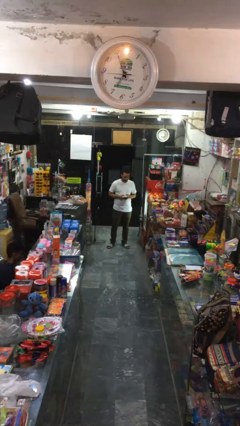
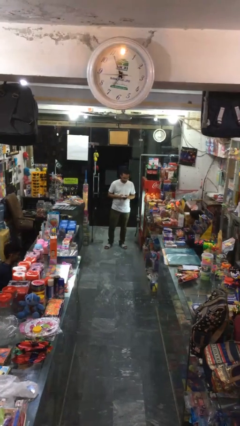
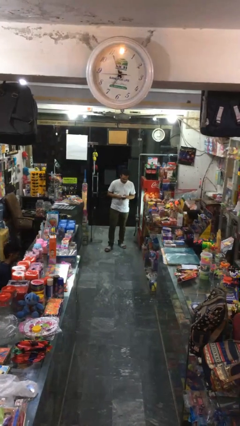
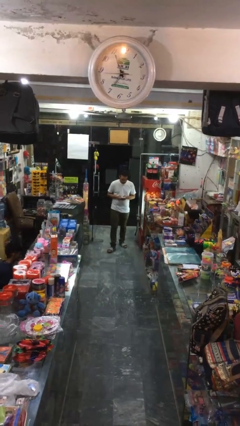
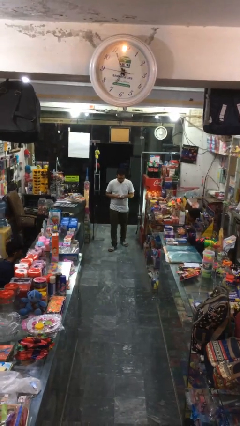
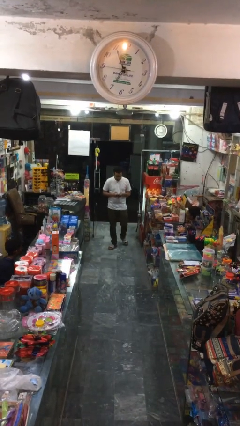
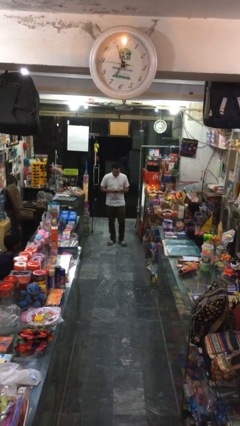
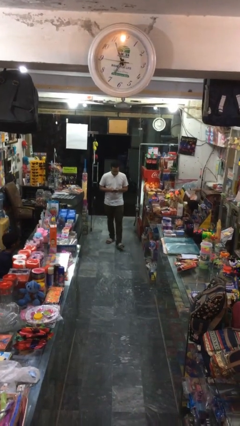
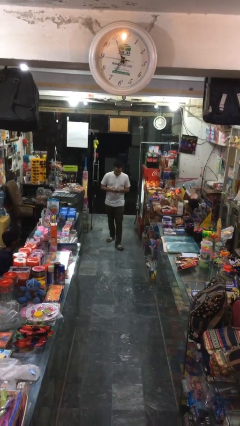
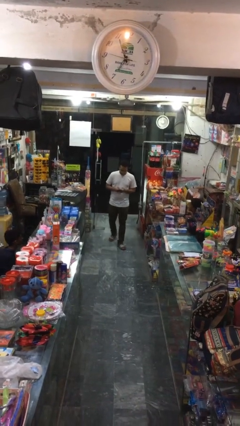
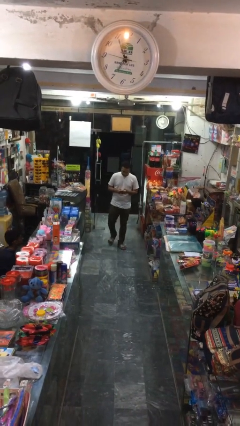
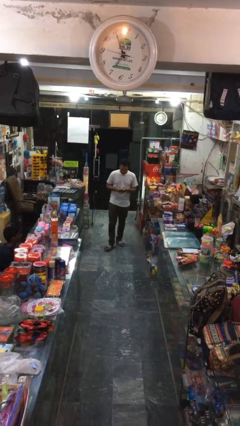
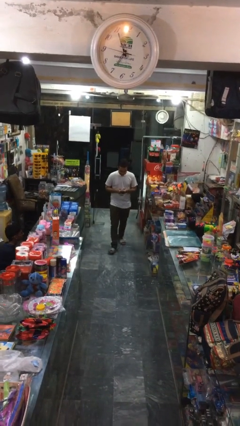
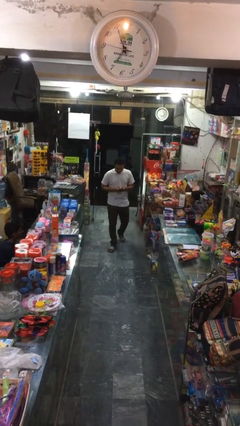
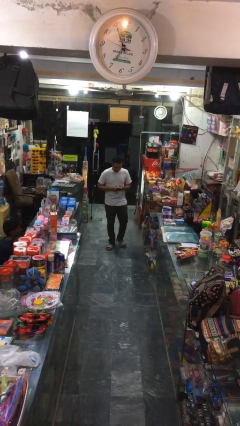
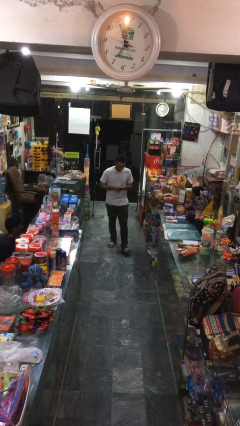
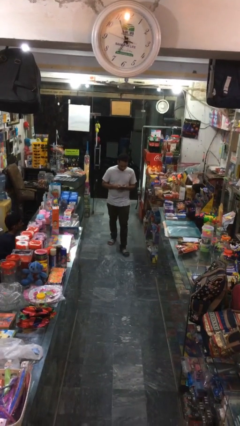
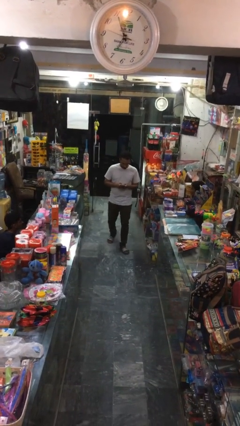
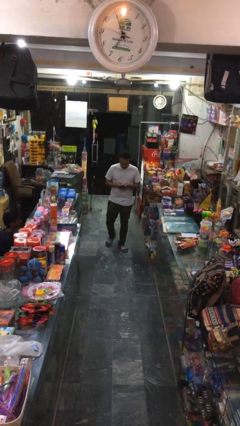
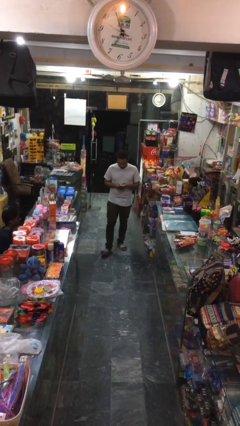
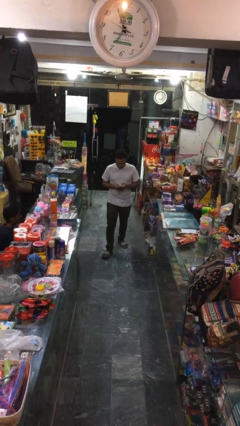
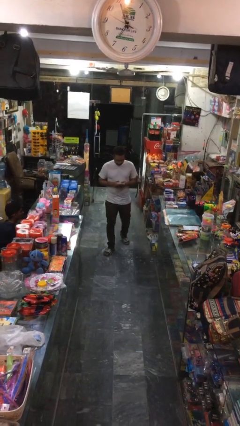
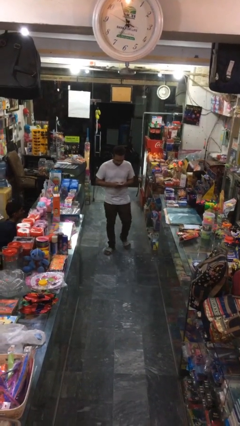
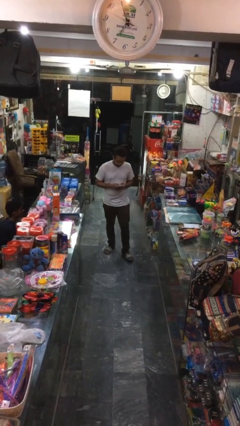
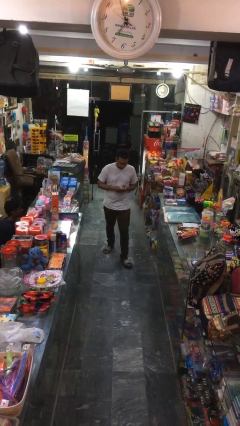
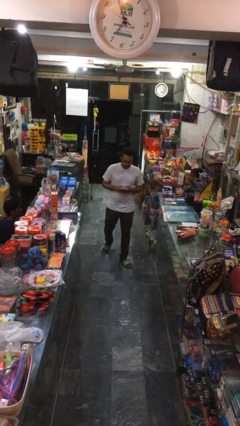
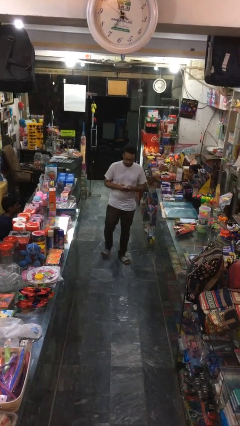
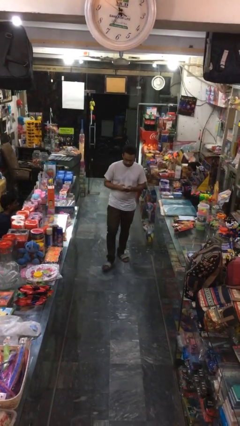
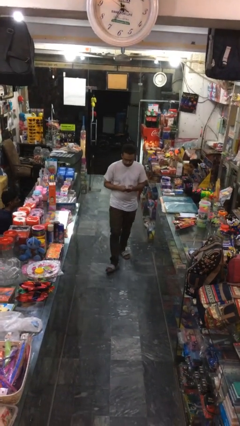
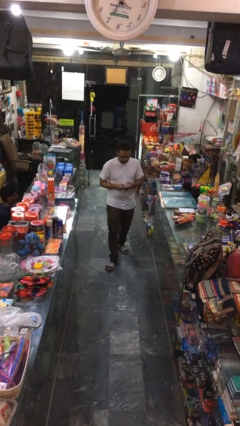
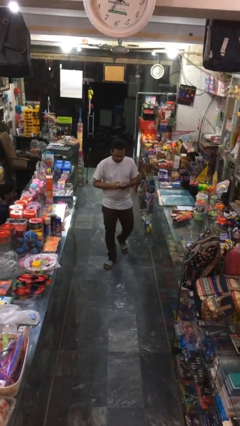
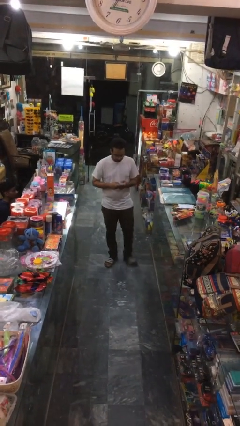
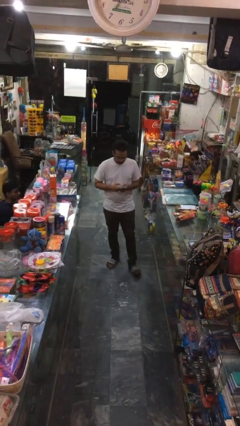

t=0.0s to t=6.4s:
person texts on phone

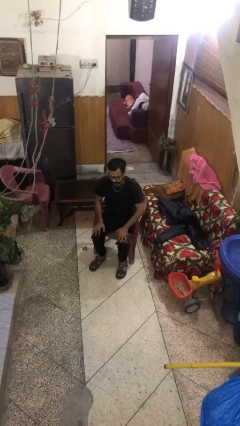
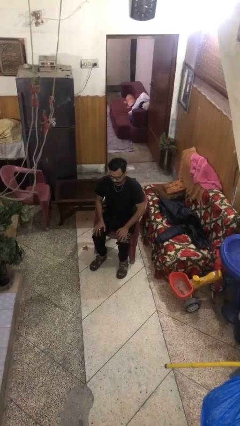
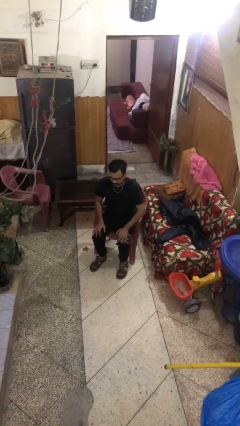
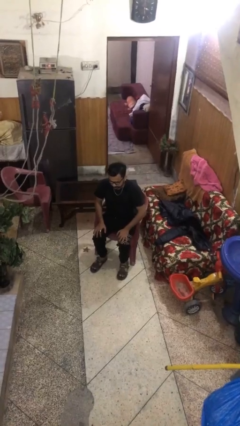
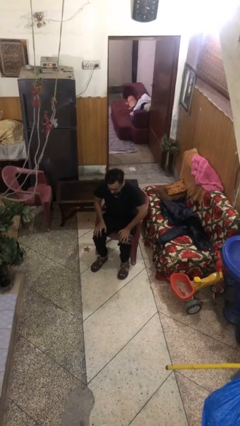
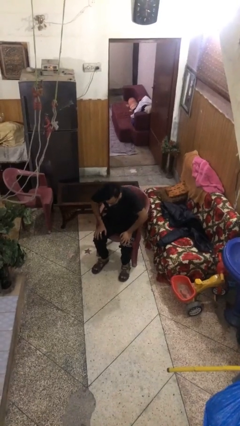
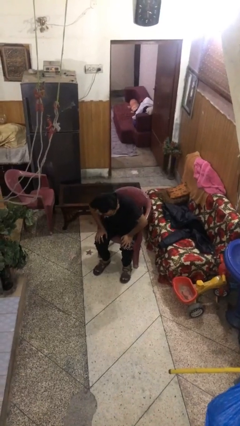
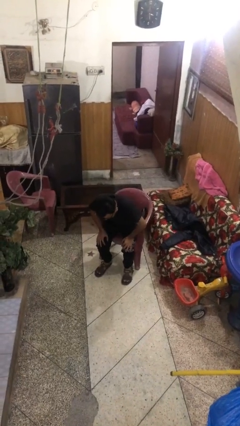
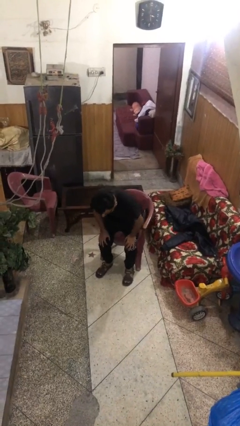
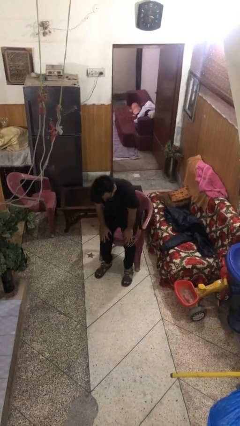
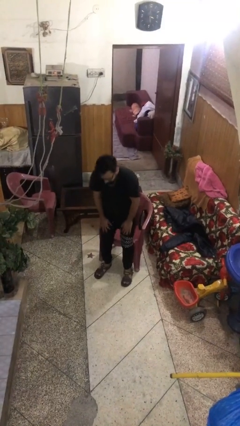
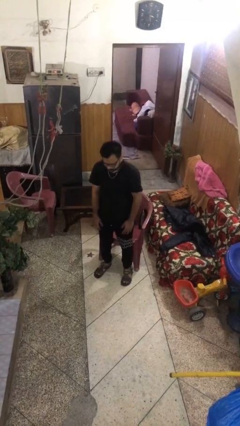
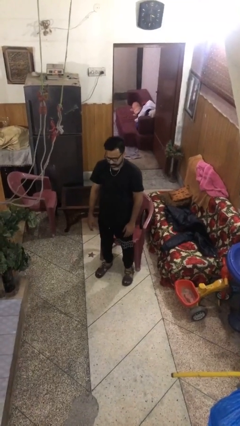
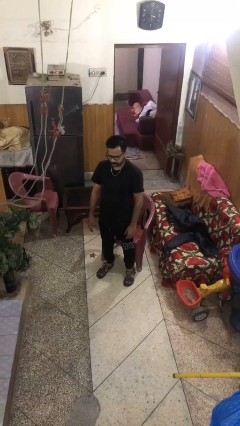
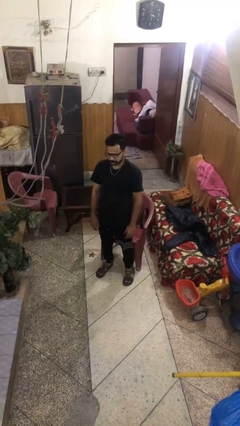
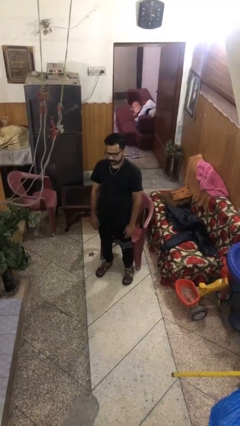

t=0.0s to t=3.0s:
person stands up

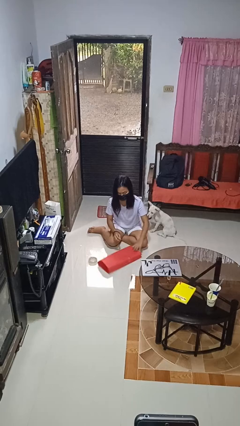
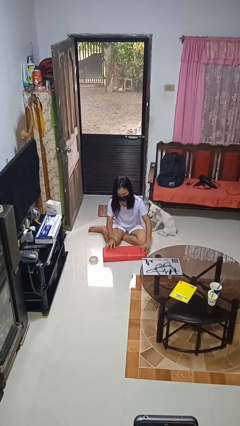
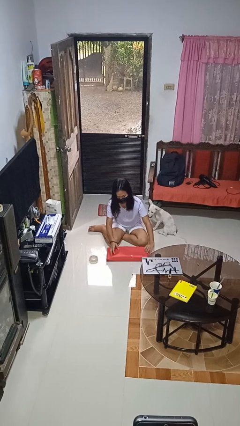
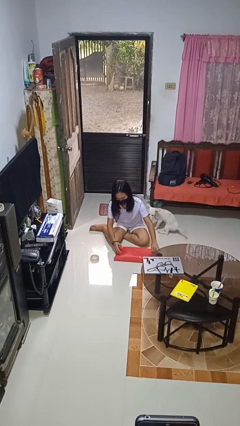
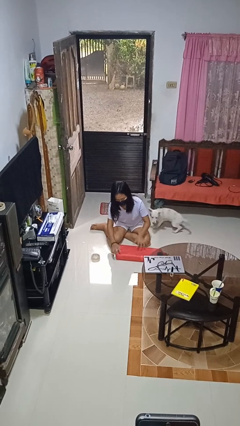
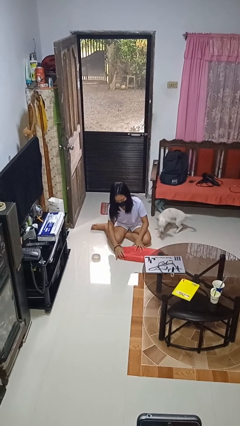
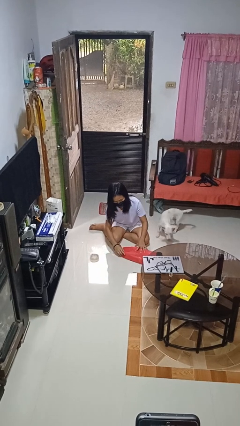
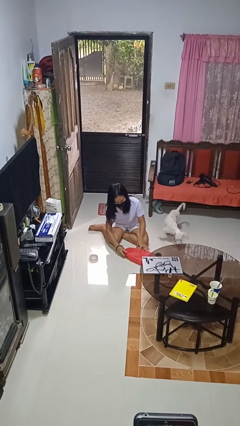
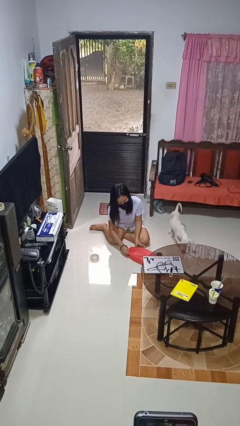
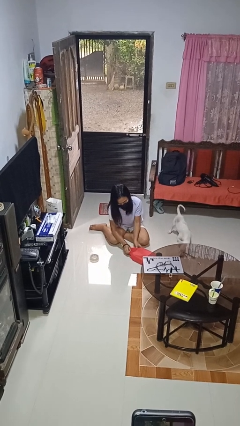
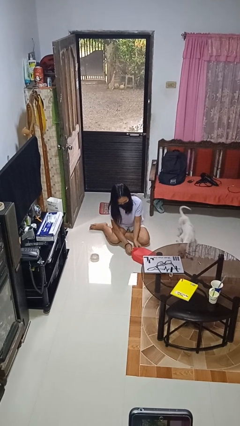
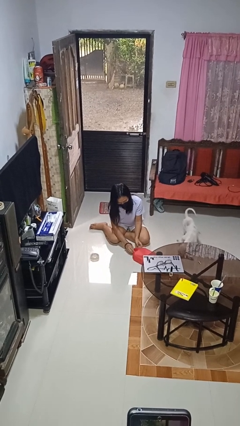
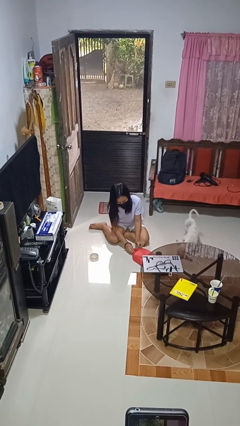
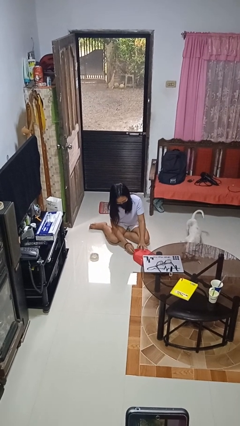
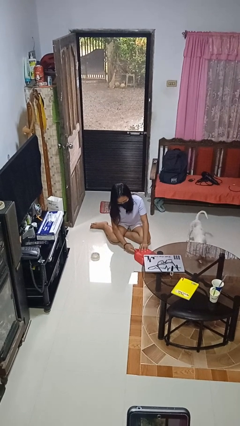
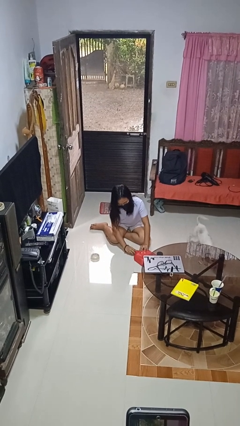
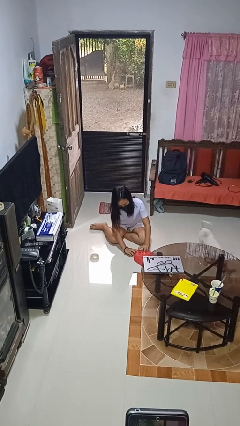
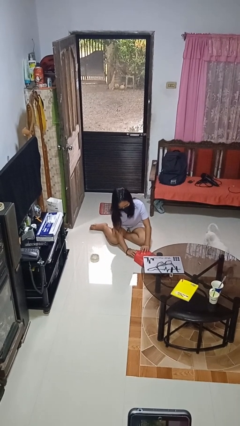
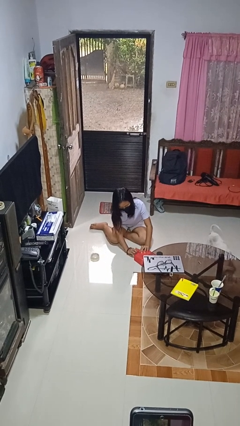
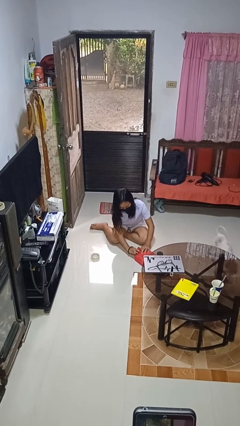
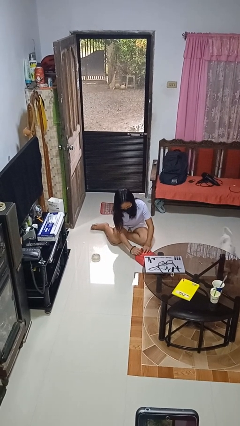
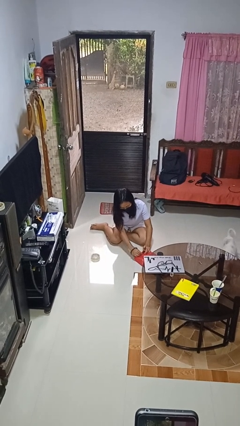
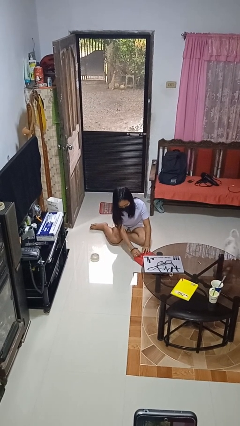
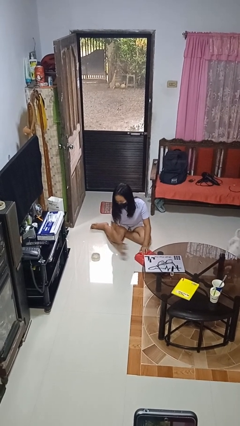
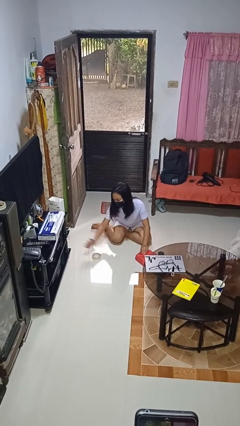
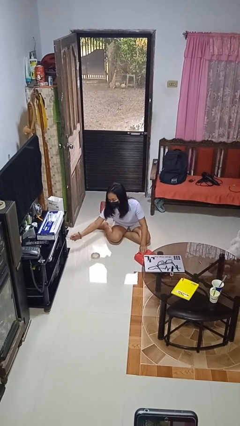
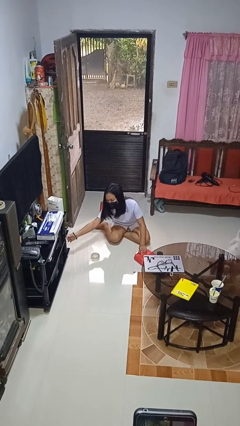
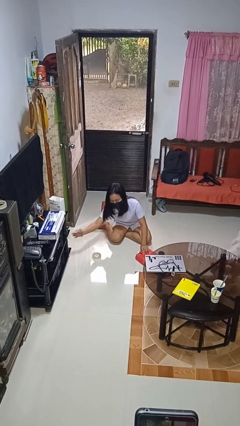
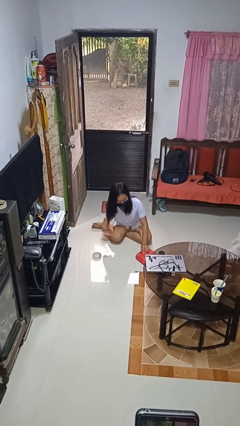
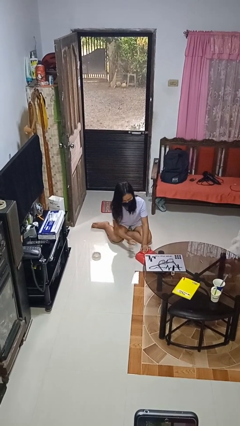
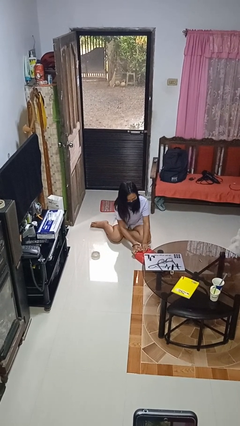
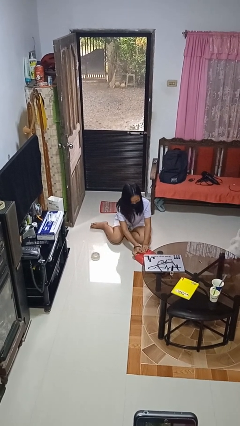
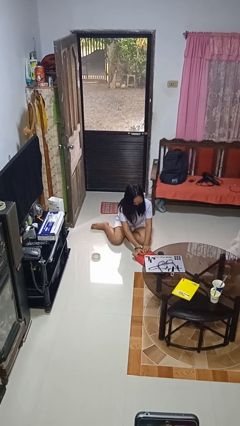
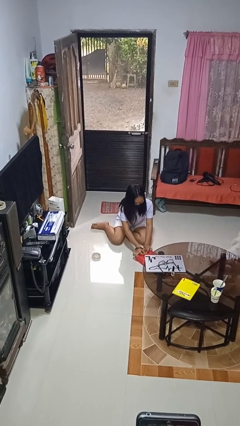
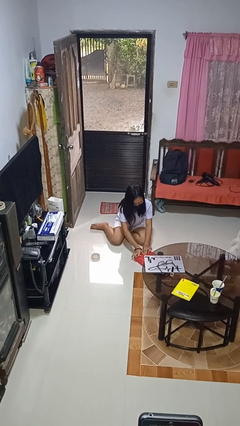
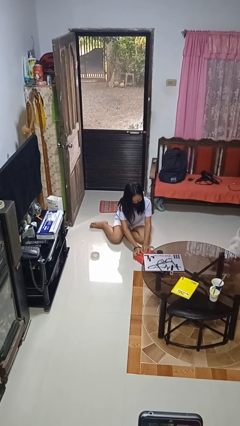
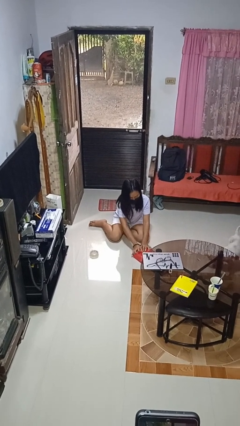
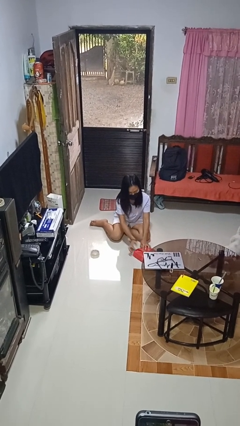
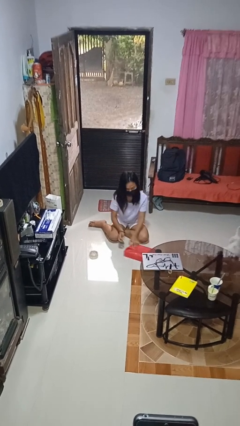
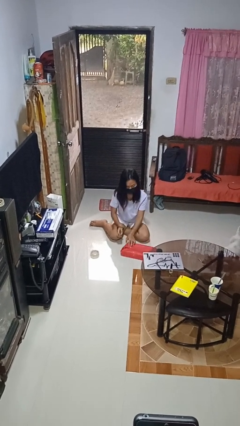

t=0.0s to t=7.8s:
person wraps box

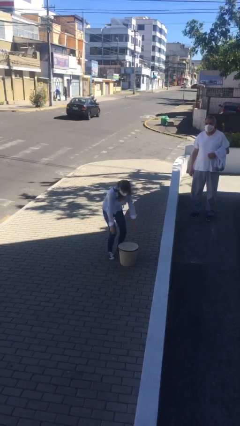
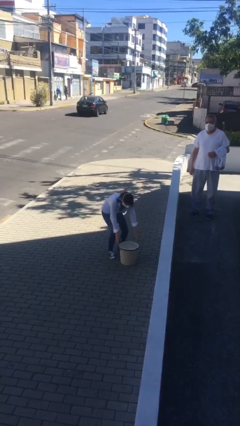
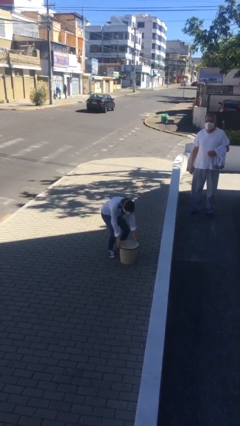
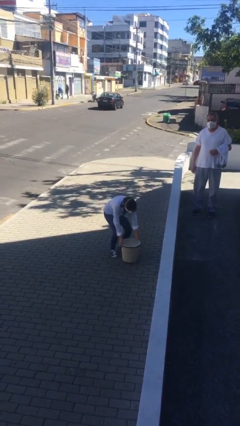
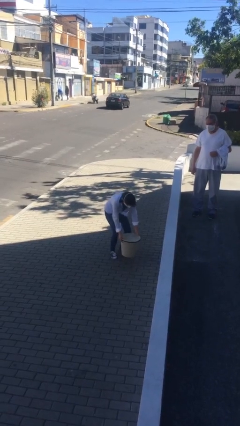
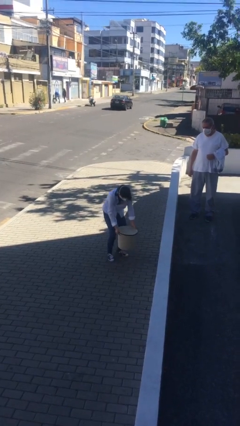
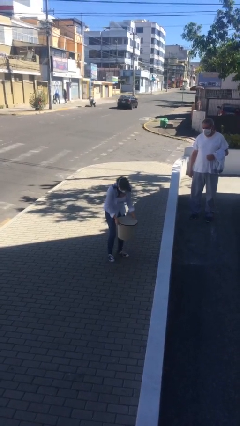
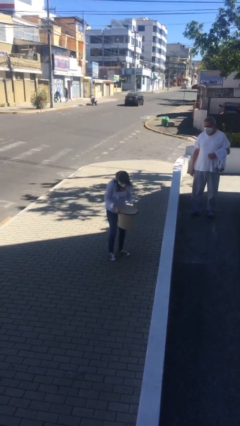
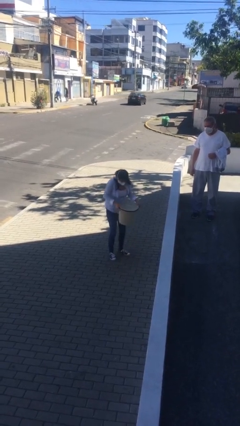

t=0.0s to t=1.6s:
person picks up object from floor
